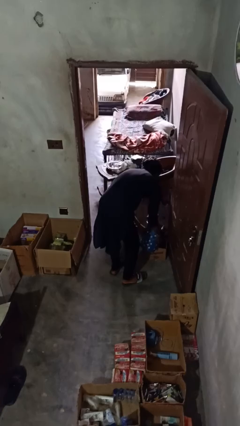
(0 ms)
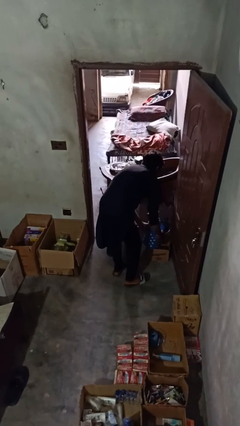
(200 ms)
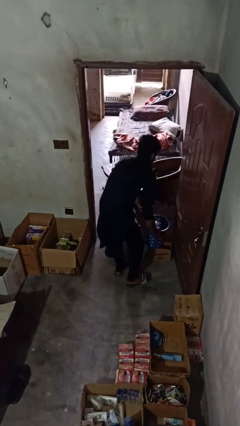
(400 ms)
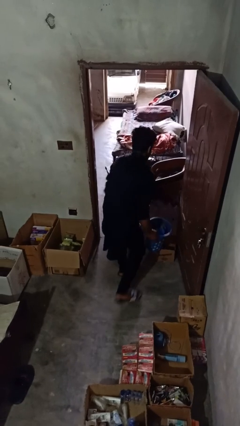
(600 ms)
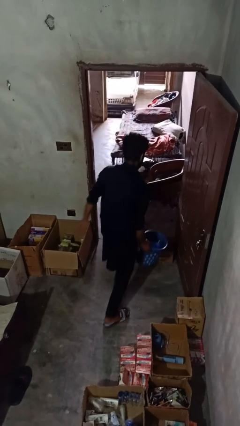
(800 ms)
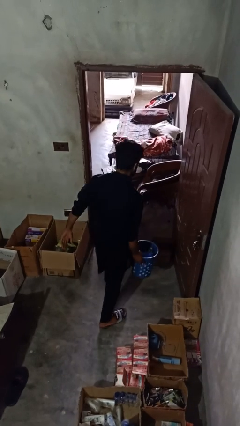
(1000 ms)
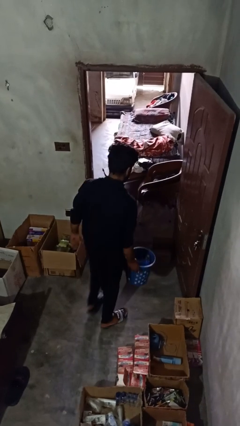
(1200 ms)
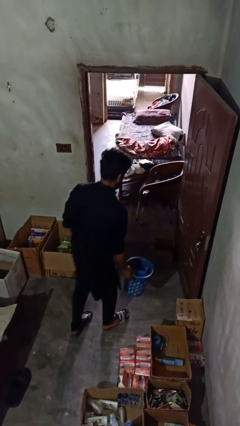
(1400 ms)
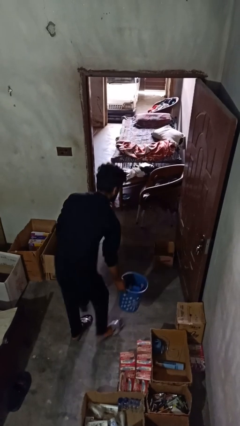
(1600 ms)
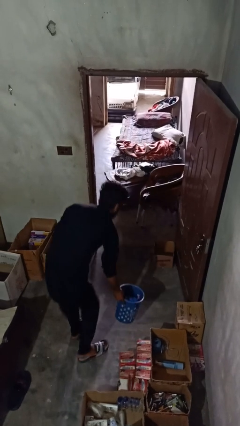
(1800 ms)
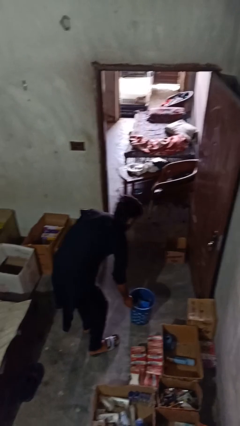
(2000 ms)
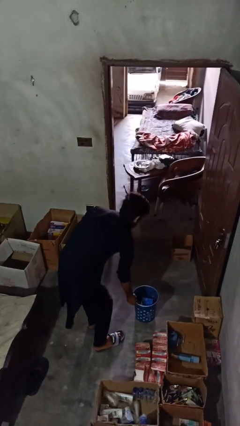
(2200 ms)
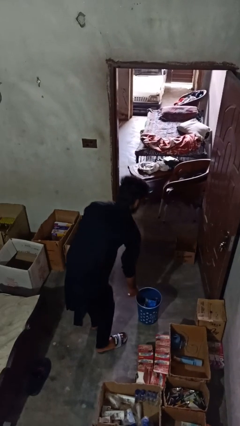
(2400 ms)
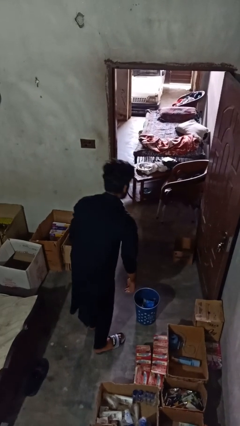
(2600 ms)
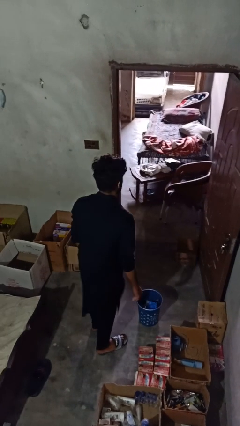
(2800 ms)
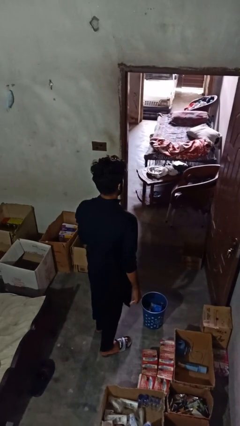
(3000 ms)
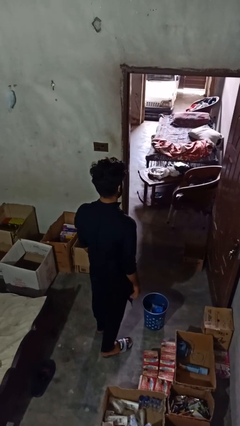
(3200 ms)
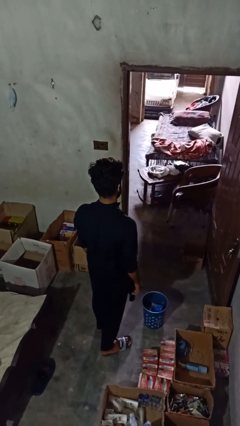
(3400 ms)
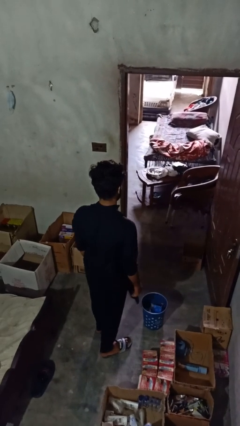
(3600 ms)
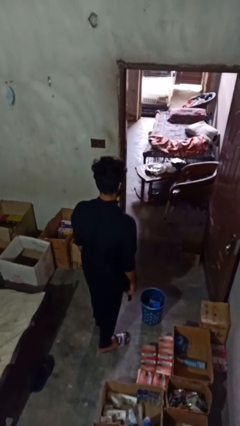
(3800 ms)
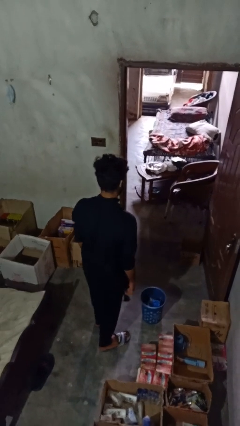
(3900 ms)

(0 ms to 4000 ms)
person inserts trashbag into trashcan

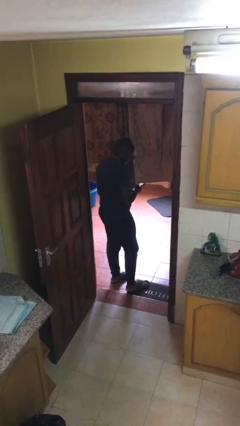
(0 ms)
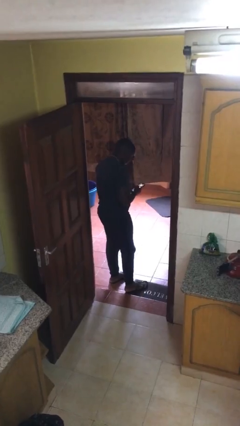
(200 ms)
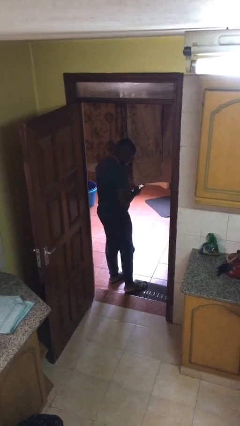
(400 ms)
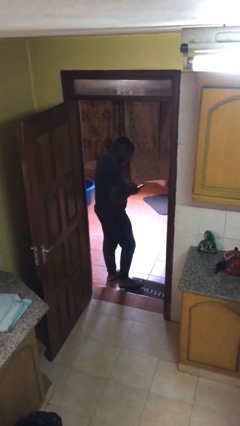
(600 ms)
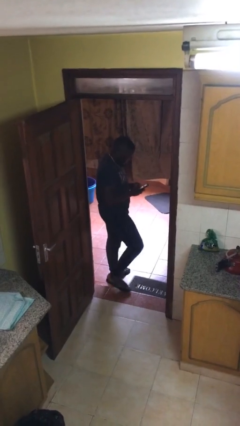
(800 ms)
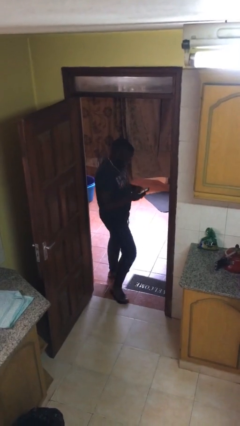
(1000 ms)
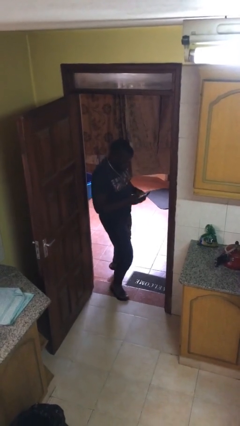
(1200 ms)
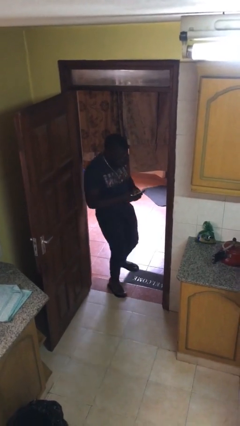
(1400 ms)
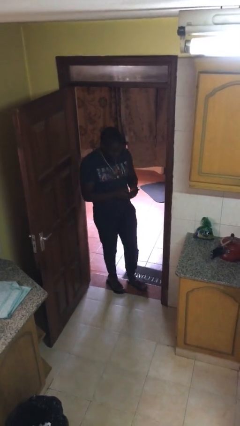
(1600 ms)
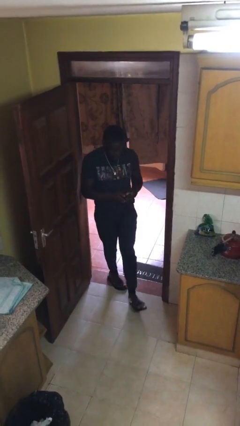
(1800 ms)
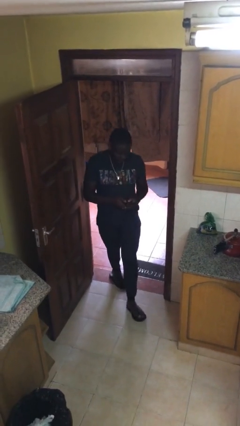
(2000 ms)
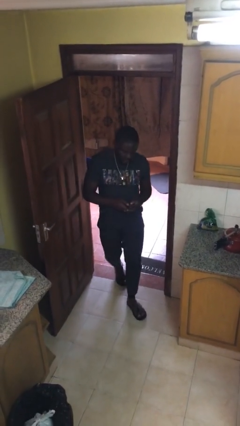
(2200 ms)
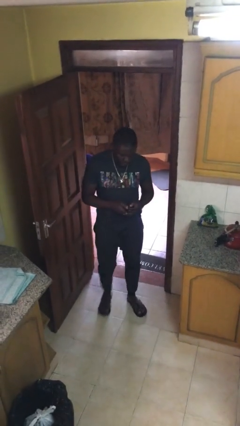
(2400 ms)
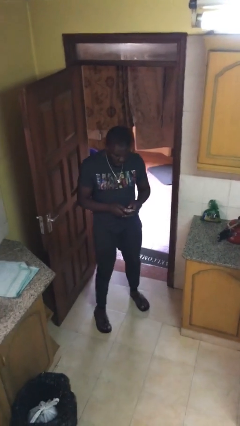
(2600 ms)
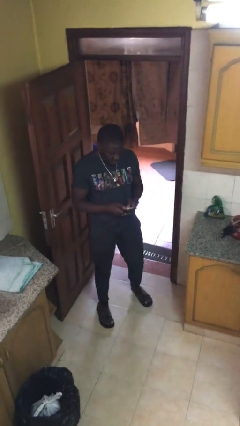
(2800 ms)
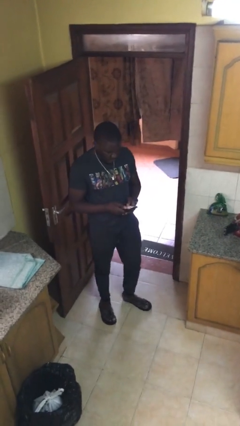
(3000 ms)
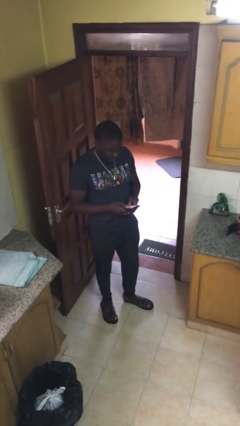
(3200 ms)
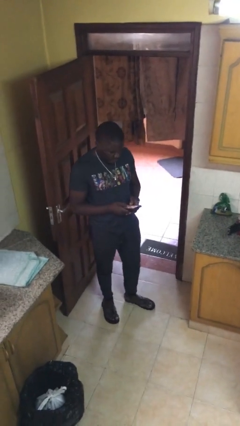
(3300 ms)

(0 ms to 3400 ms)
person enters scene through structure

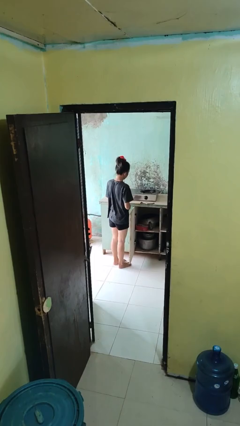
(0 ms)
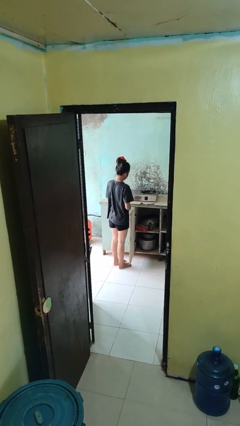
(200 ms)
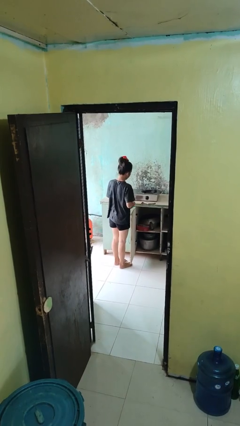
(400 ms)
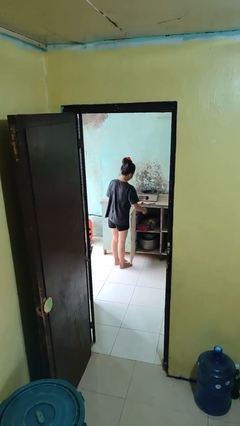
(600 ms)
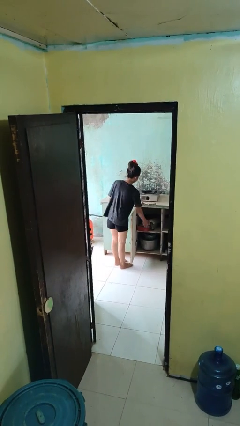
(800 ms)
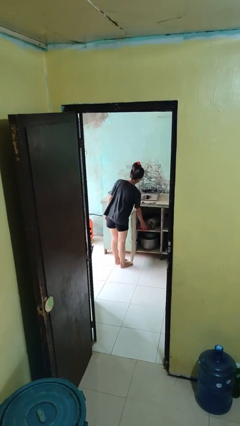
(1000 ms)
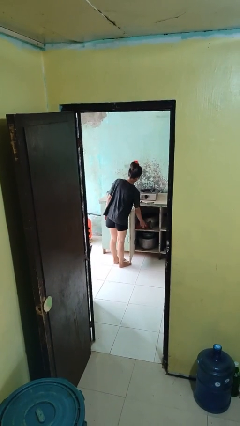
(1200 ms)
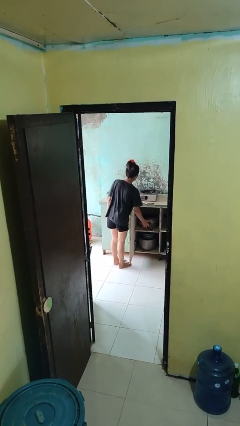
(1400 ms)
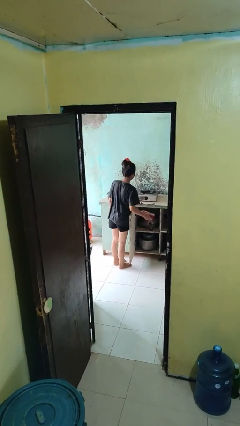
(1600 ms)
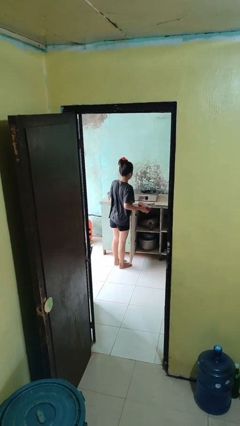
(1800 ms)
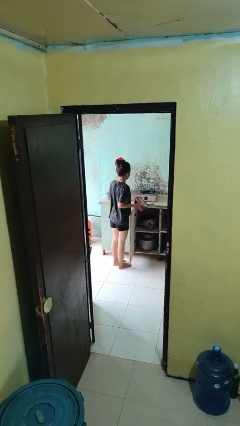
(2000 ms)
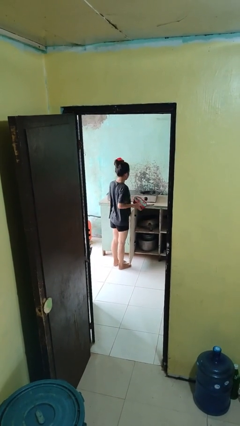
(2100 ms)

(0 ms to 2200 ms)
person takes object from cabinet

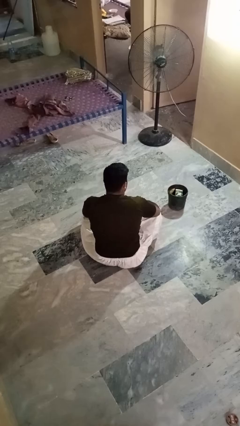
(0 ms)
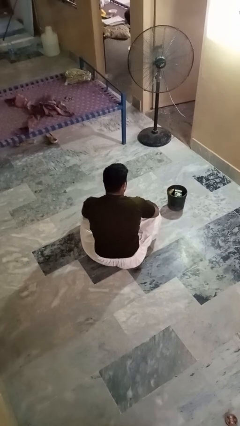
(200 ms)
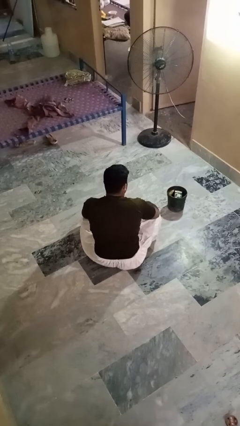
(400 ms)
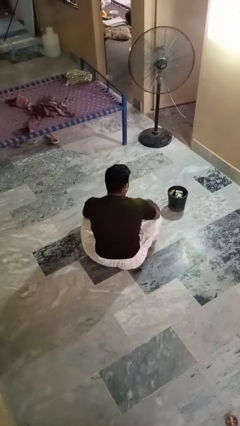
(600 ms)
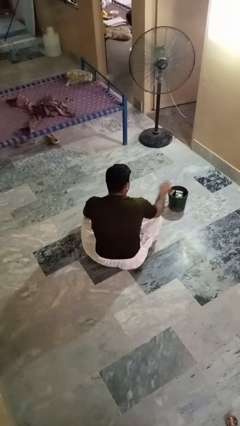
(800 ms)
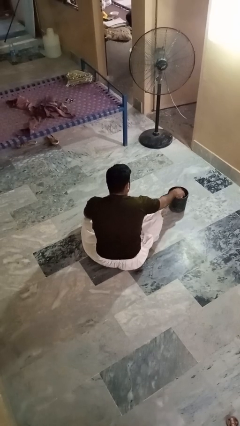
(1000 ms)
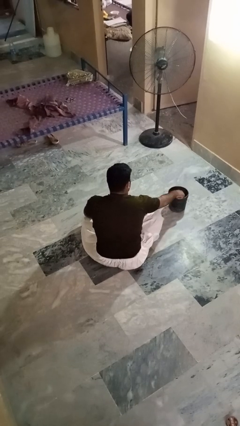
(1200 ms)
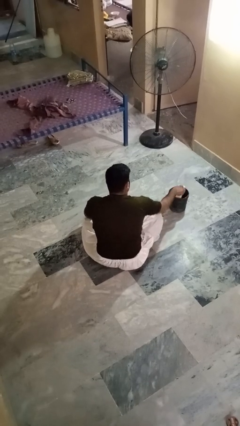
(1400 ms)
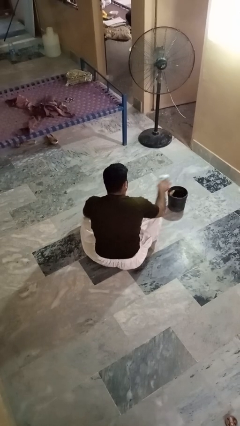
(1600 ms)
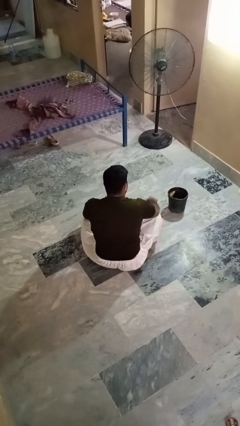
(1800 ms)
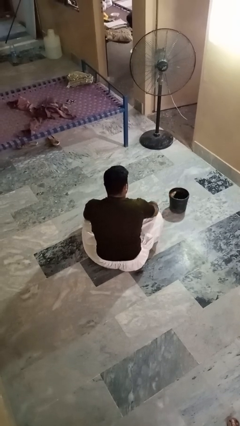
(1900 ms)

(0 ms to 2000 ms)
person takes object from basket

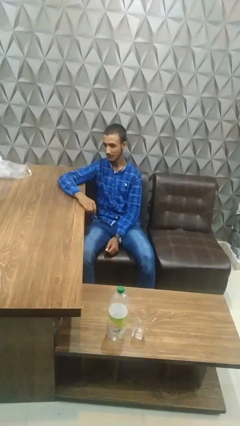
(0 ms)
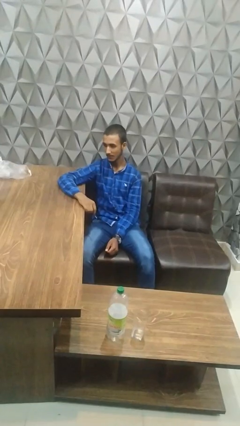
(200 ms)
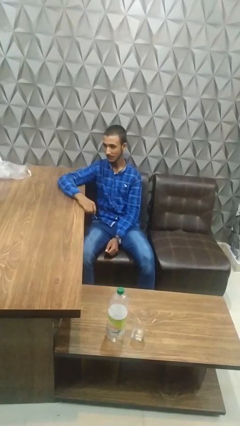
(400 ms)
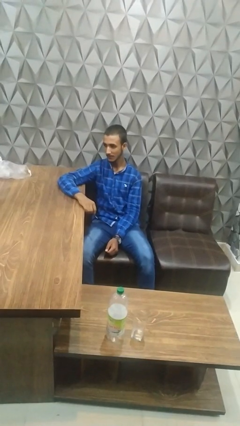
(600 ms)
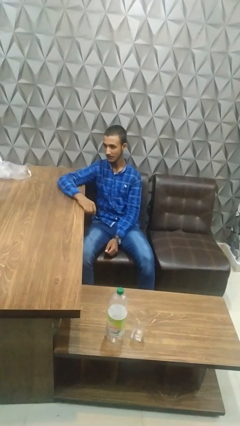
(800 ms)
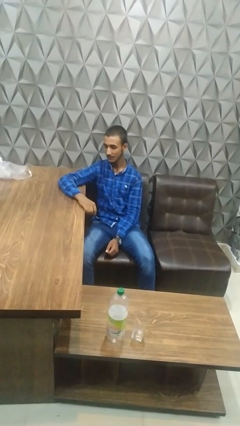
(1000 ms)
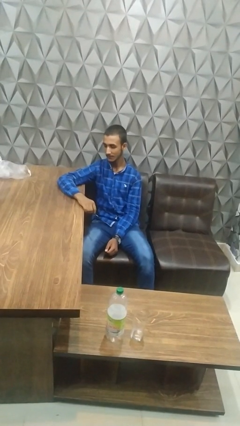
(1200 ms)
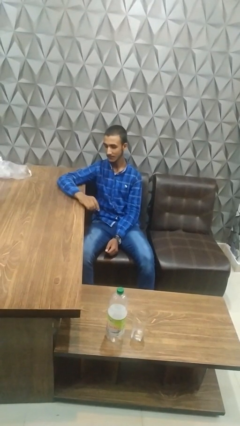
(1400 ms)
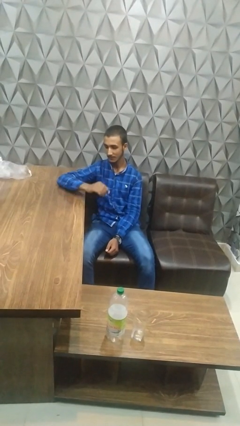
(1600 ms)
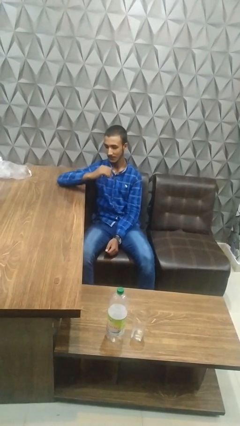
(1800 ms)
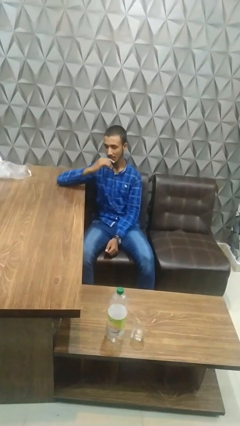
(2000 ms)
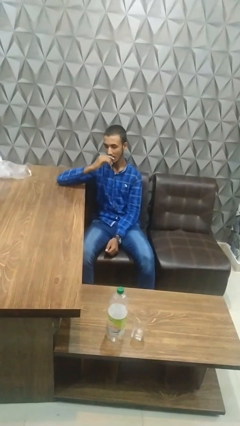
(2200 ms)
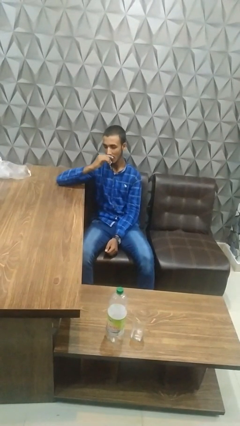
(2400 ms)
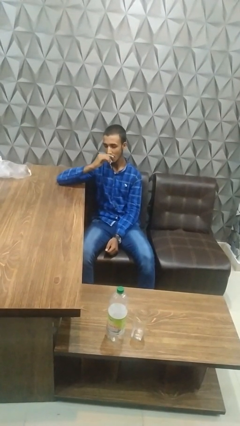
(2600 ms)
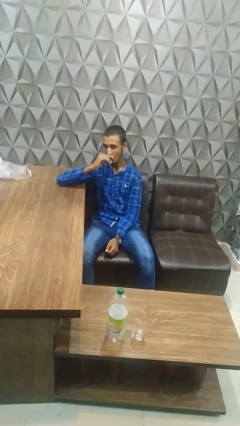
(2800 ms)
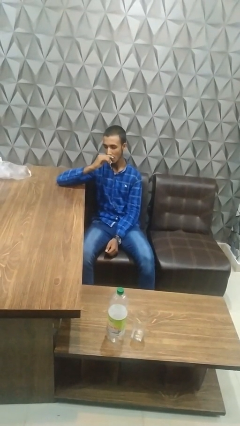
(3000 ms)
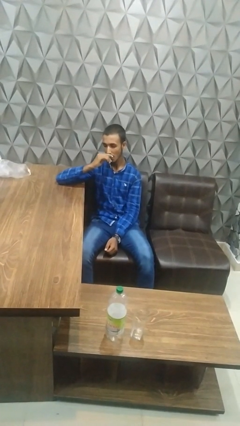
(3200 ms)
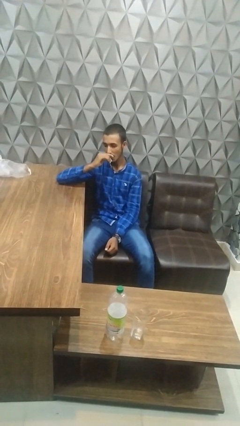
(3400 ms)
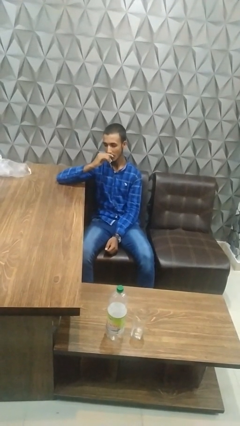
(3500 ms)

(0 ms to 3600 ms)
person vapes

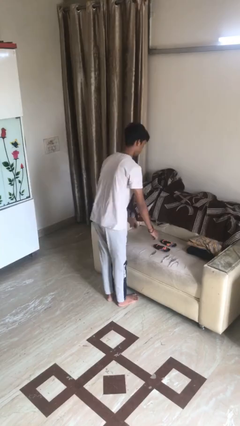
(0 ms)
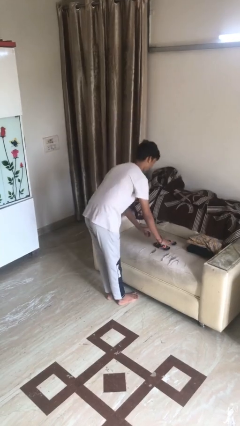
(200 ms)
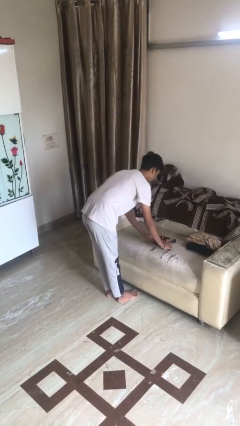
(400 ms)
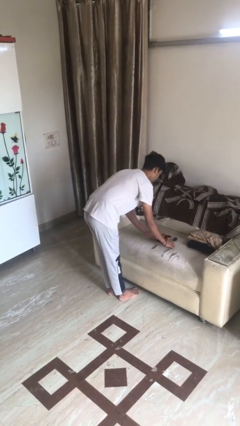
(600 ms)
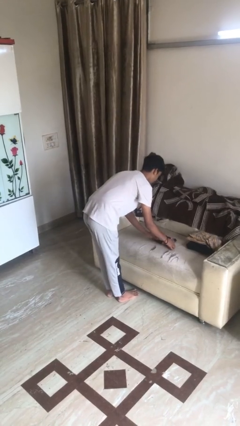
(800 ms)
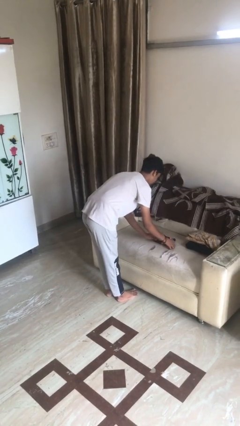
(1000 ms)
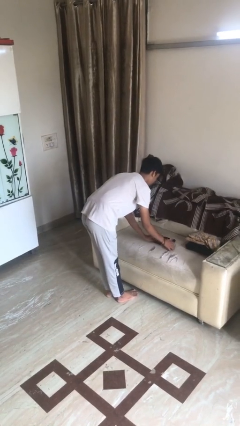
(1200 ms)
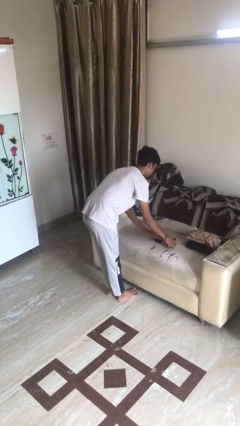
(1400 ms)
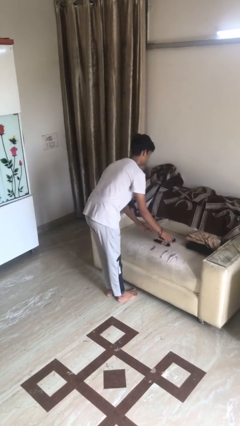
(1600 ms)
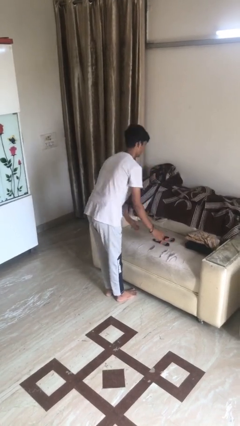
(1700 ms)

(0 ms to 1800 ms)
person folds socks

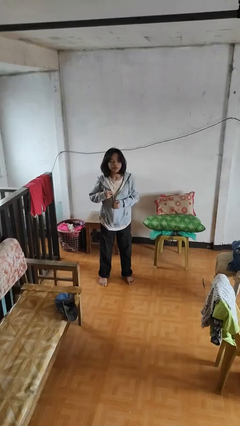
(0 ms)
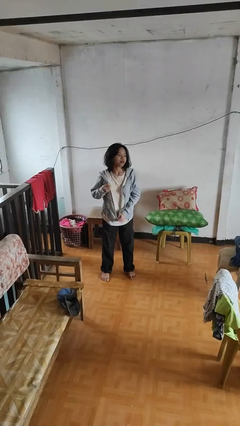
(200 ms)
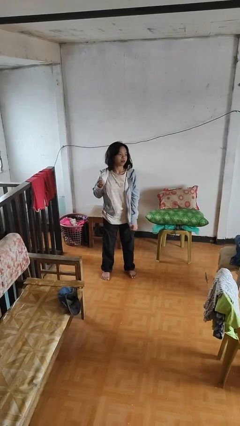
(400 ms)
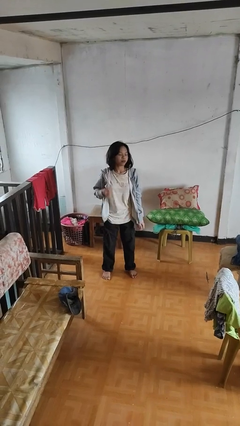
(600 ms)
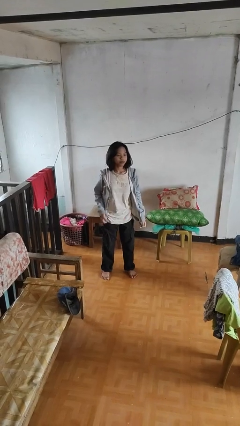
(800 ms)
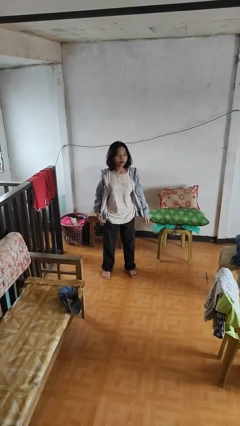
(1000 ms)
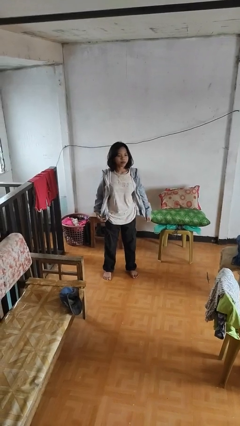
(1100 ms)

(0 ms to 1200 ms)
person unzips jacket
